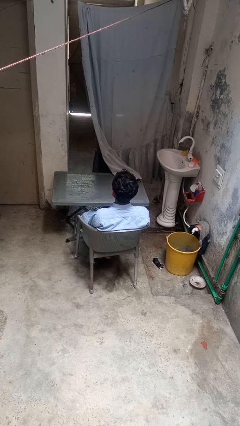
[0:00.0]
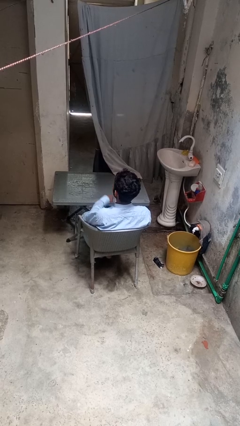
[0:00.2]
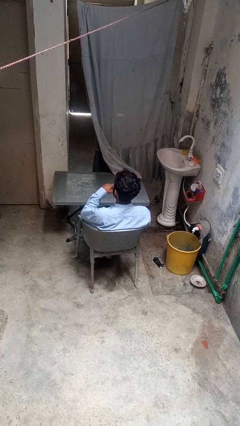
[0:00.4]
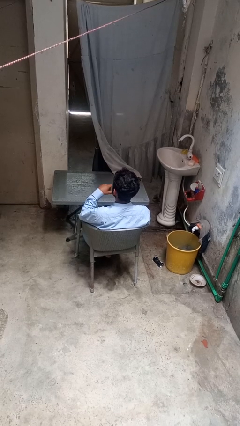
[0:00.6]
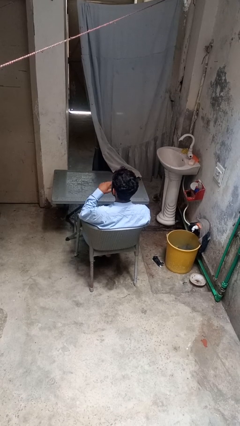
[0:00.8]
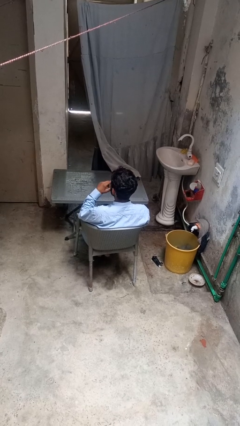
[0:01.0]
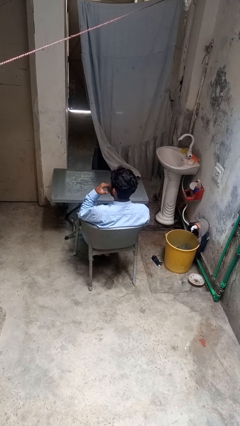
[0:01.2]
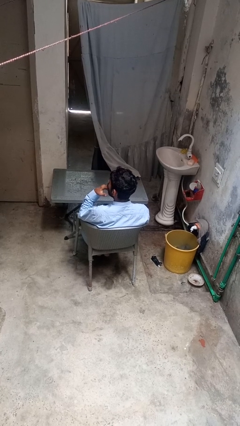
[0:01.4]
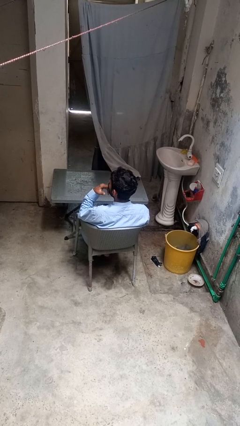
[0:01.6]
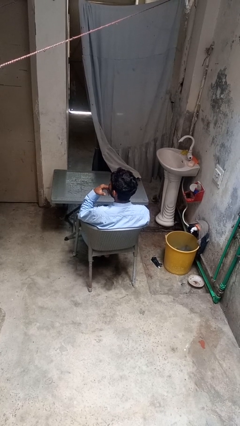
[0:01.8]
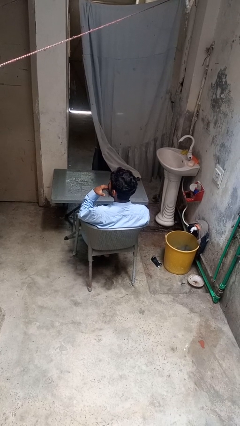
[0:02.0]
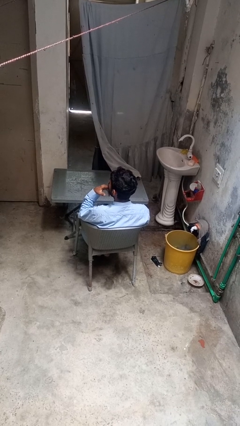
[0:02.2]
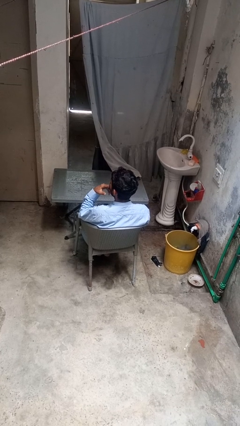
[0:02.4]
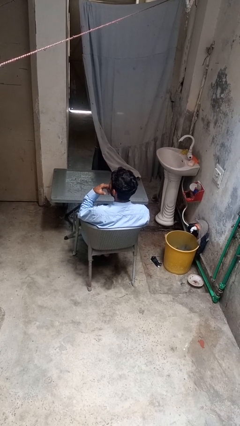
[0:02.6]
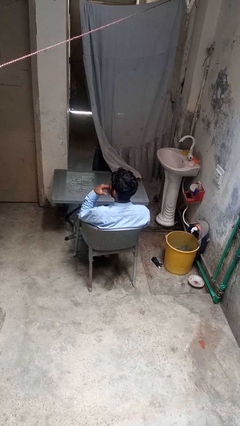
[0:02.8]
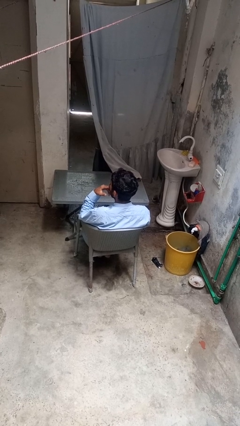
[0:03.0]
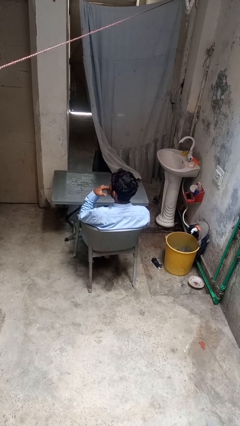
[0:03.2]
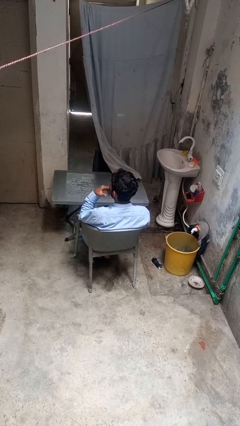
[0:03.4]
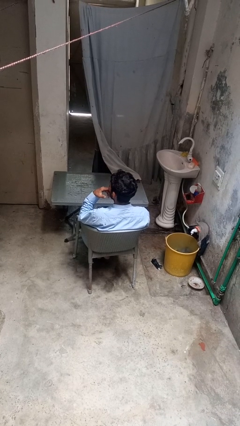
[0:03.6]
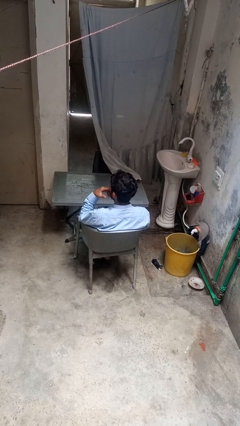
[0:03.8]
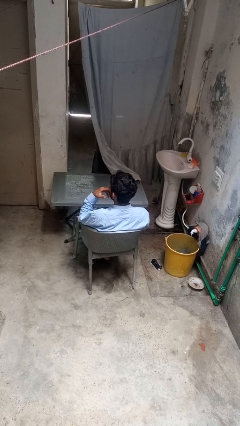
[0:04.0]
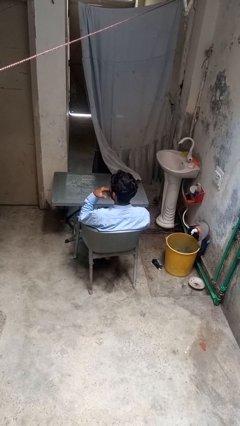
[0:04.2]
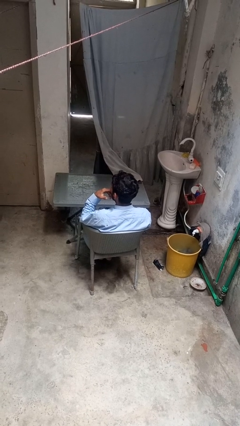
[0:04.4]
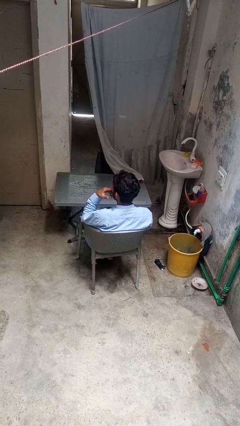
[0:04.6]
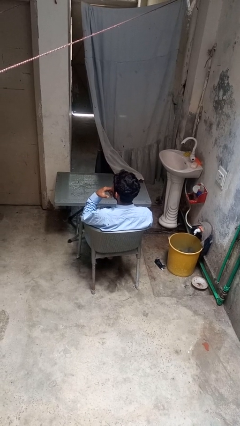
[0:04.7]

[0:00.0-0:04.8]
person licks fingers

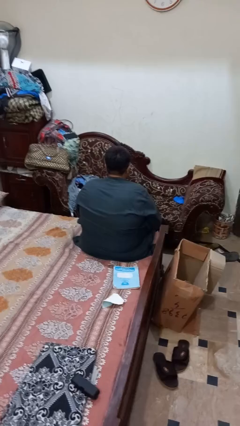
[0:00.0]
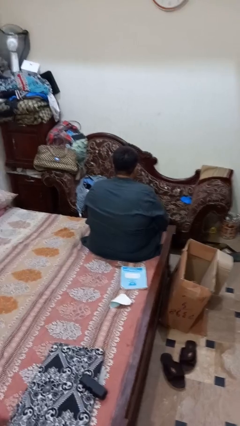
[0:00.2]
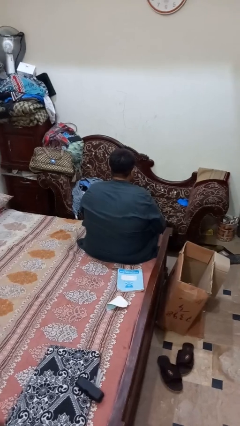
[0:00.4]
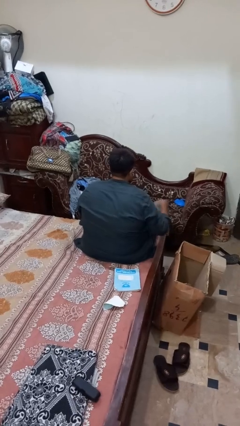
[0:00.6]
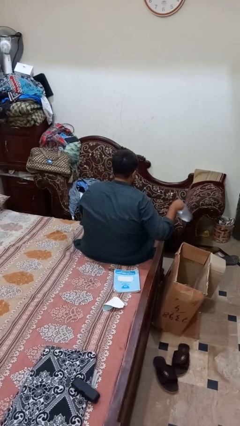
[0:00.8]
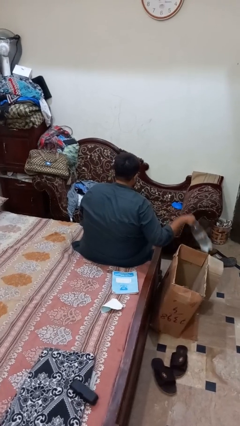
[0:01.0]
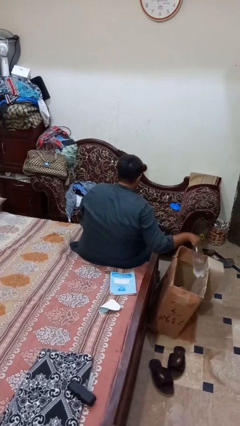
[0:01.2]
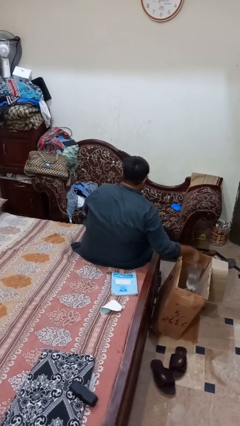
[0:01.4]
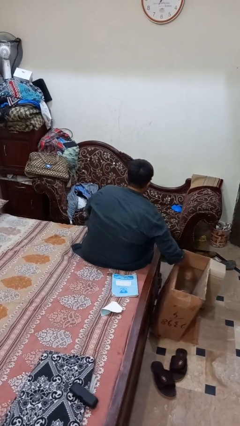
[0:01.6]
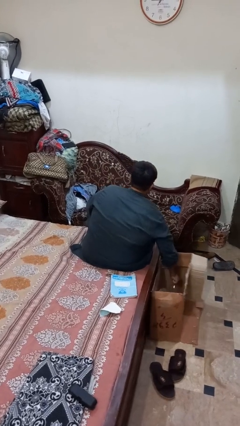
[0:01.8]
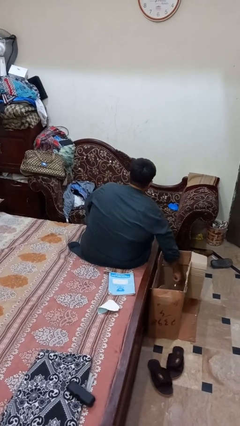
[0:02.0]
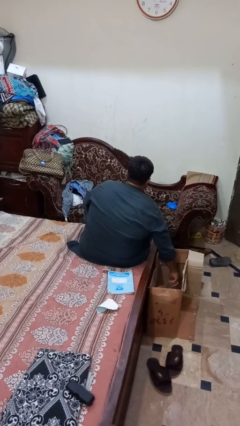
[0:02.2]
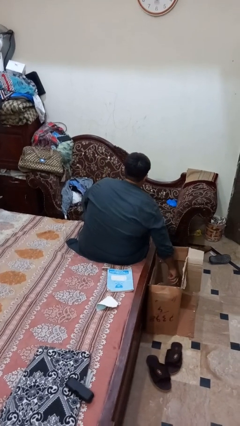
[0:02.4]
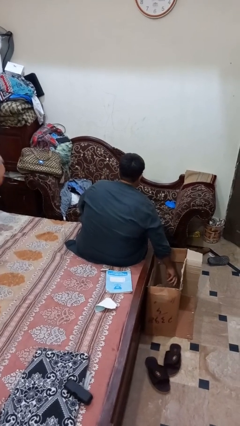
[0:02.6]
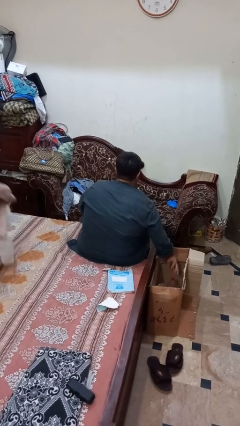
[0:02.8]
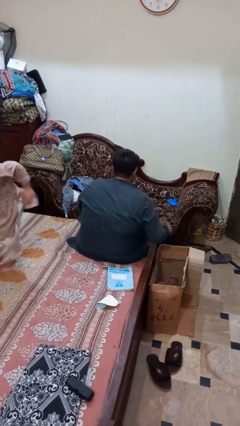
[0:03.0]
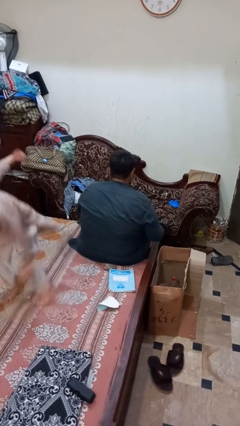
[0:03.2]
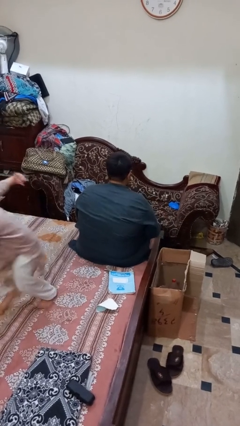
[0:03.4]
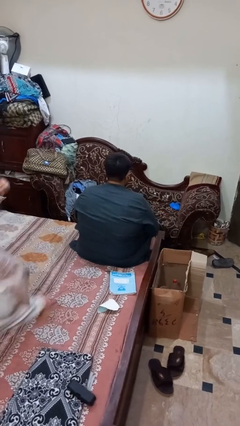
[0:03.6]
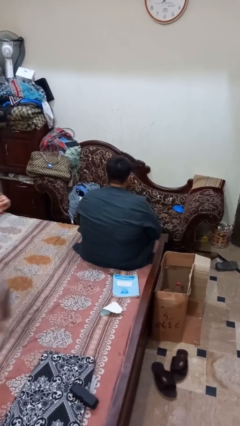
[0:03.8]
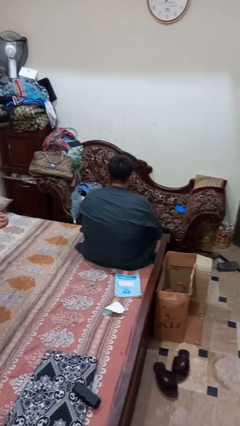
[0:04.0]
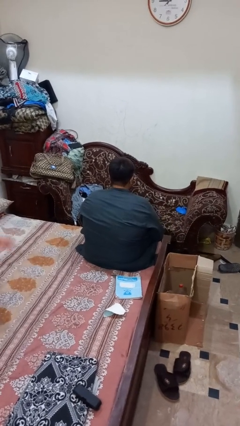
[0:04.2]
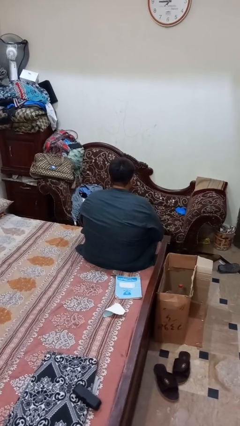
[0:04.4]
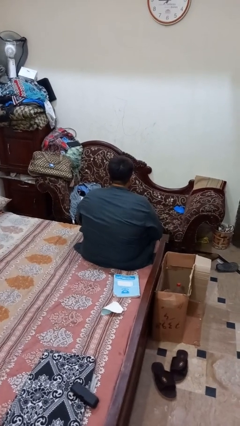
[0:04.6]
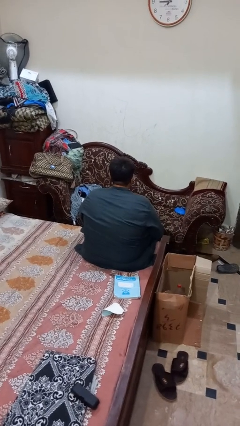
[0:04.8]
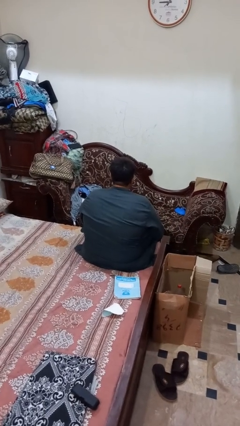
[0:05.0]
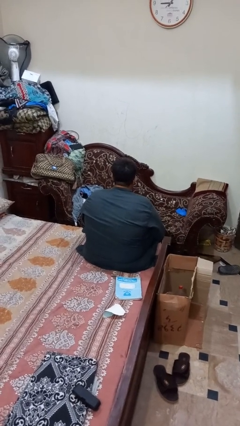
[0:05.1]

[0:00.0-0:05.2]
person puts object into box

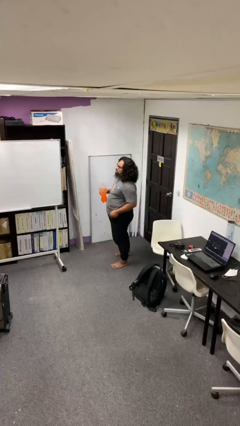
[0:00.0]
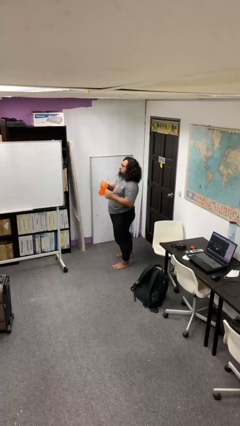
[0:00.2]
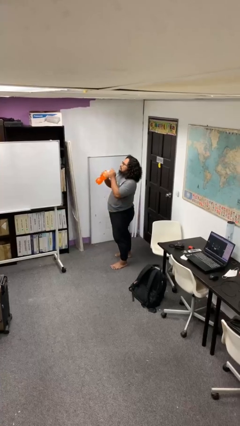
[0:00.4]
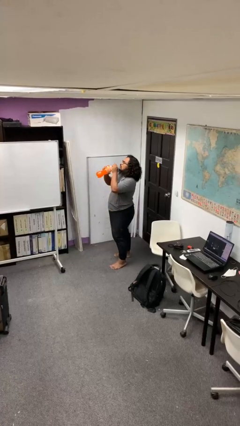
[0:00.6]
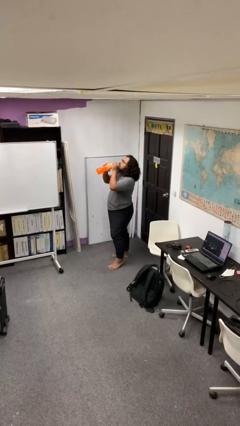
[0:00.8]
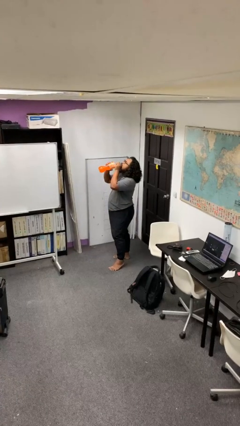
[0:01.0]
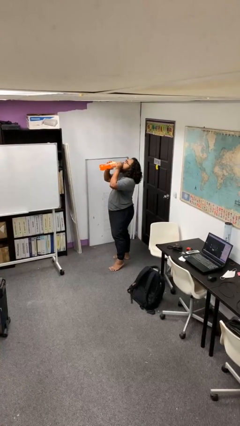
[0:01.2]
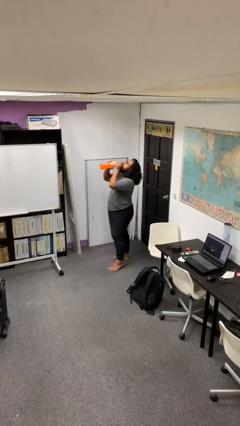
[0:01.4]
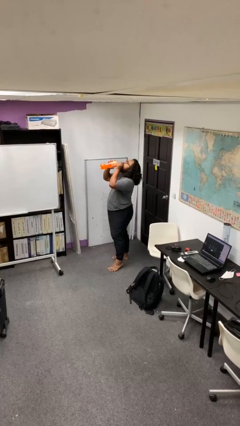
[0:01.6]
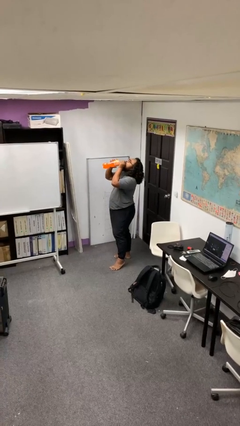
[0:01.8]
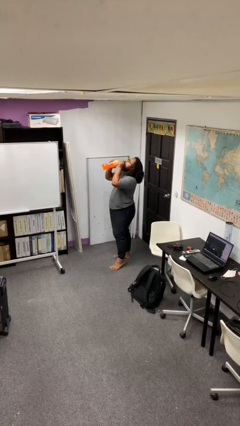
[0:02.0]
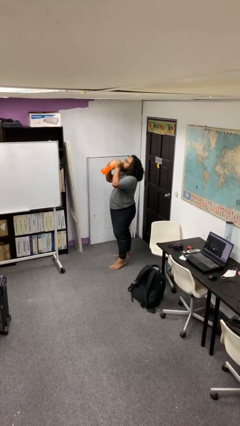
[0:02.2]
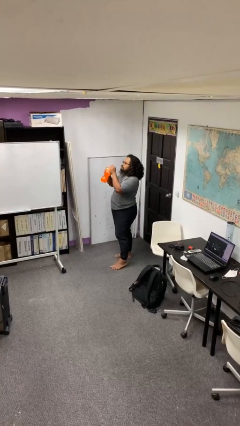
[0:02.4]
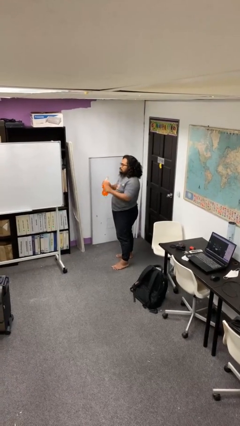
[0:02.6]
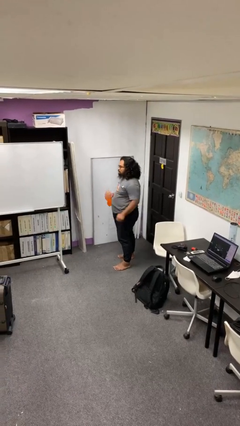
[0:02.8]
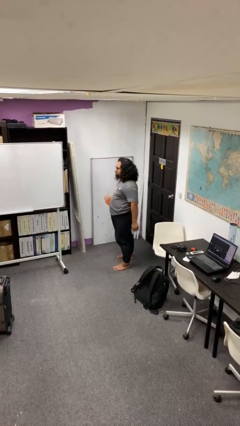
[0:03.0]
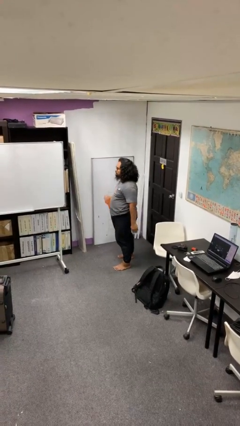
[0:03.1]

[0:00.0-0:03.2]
person drinks from bottle

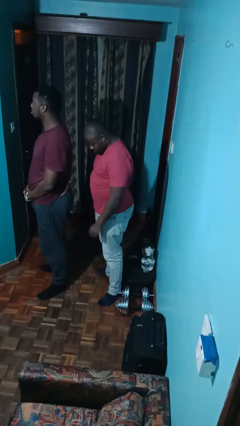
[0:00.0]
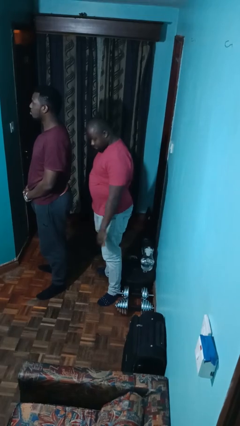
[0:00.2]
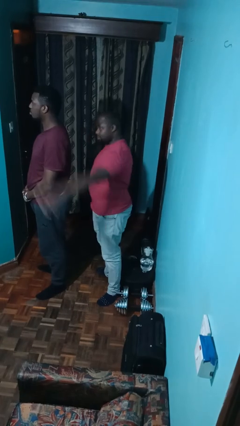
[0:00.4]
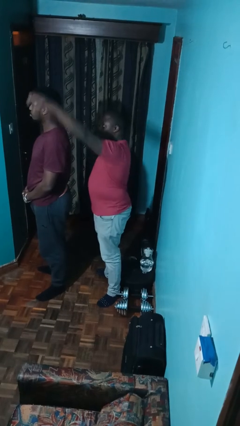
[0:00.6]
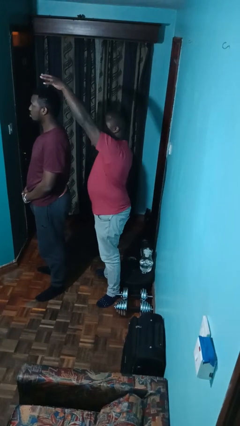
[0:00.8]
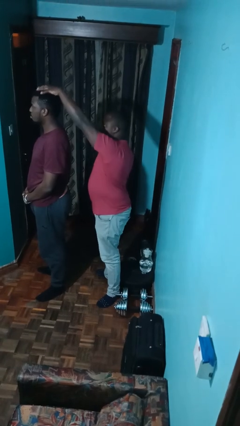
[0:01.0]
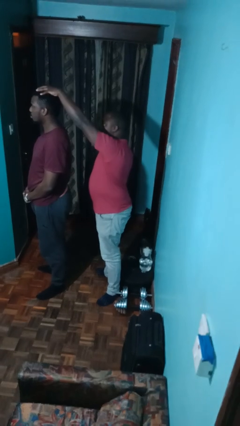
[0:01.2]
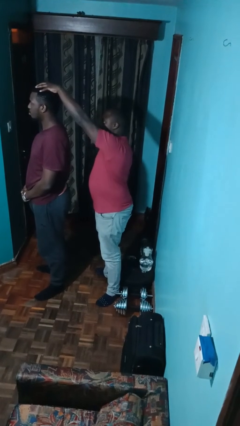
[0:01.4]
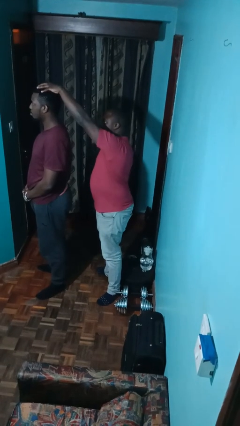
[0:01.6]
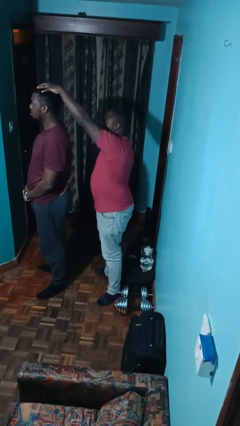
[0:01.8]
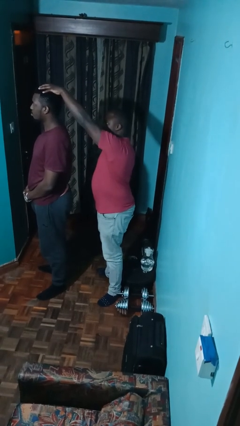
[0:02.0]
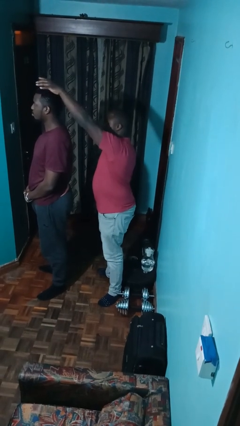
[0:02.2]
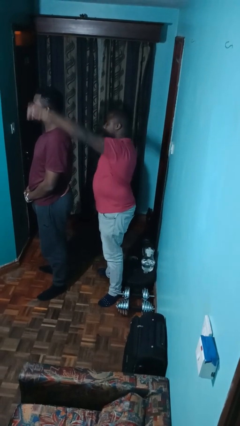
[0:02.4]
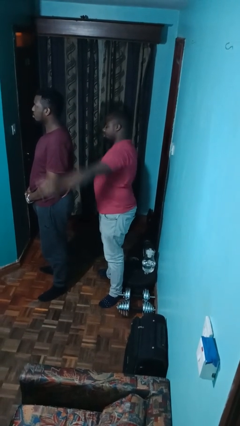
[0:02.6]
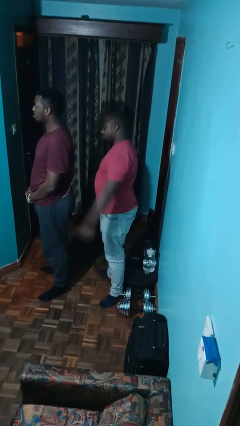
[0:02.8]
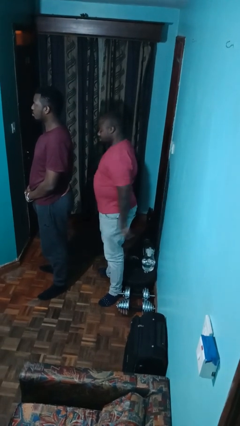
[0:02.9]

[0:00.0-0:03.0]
person grabs person by hair

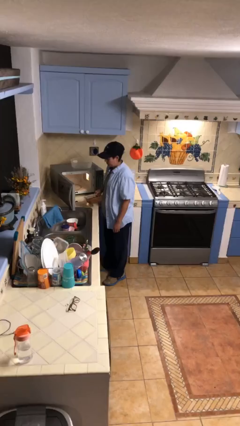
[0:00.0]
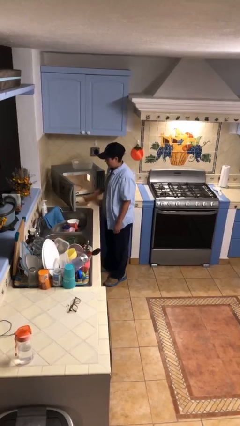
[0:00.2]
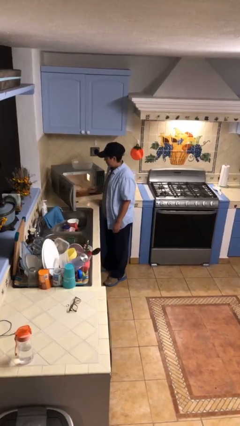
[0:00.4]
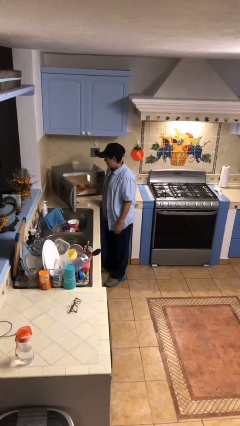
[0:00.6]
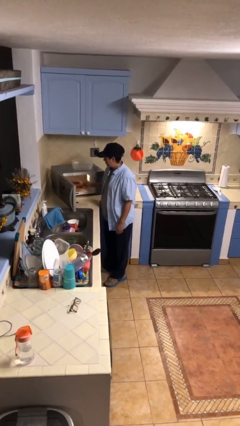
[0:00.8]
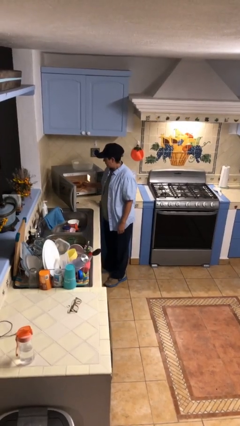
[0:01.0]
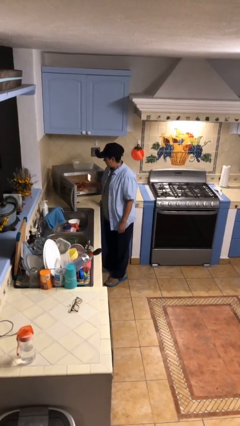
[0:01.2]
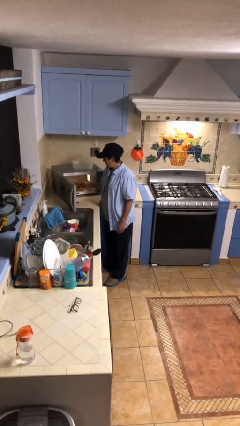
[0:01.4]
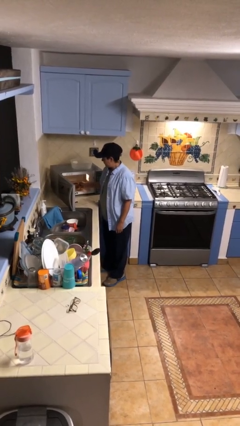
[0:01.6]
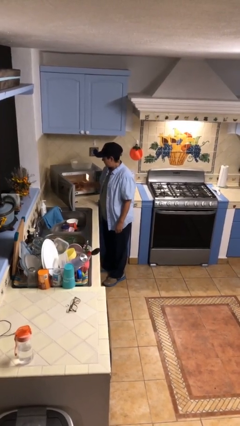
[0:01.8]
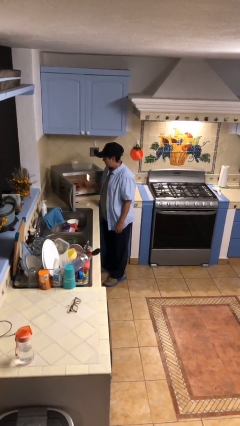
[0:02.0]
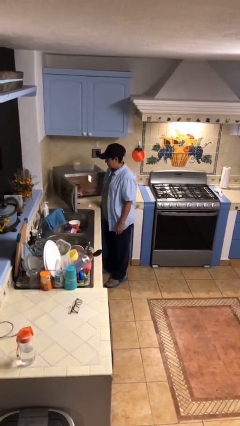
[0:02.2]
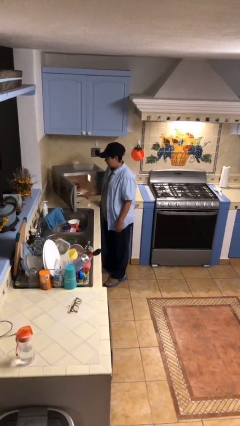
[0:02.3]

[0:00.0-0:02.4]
person puts object into microwave
